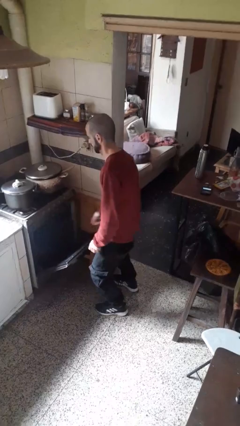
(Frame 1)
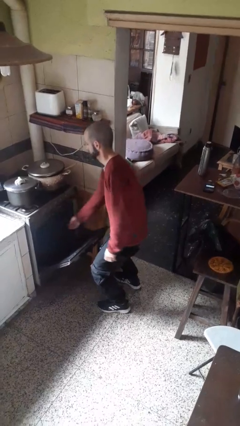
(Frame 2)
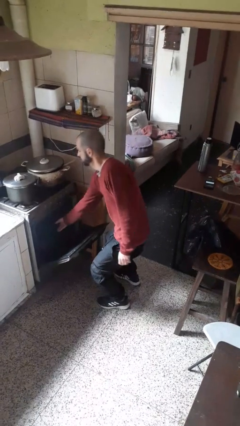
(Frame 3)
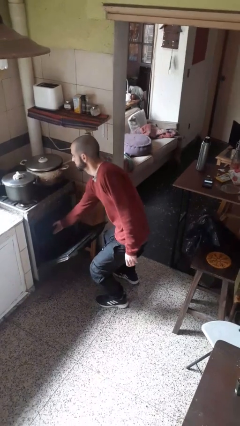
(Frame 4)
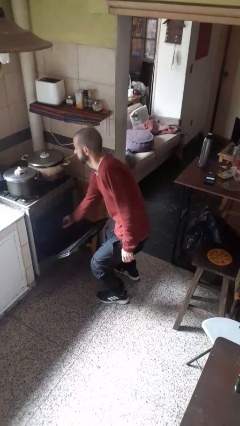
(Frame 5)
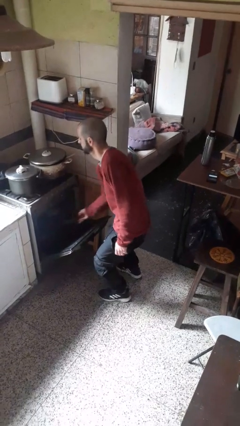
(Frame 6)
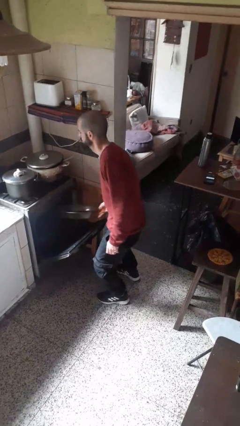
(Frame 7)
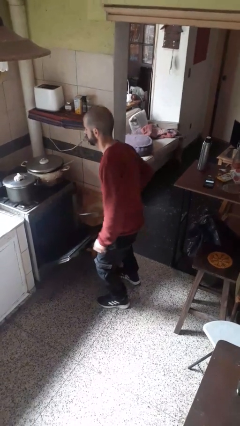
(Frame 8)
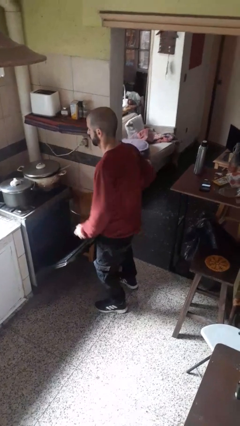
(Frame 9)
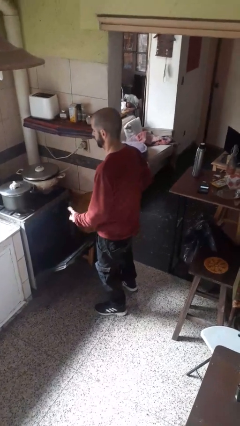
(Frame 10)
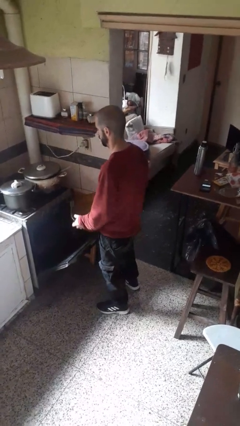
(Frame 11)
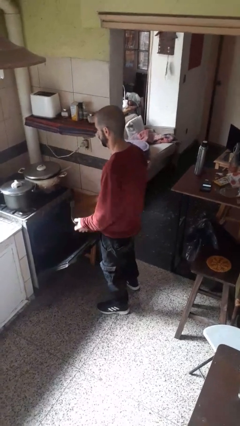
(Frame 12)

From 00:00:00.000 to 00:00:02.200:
person takes object from oven

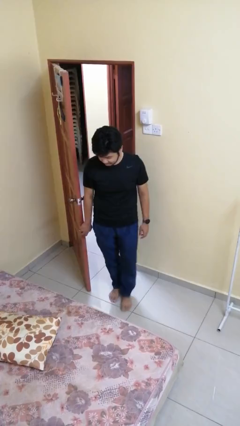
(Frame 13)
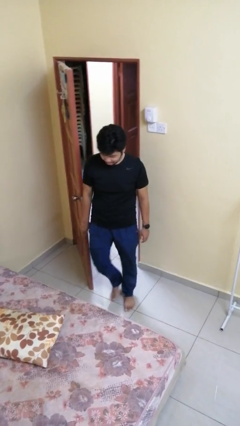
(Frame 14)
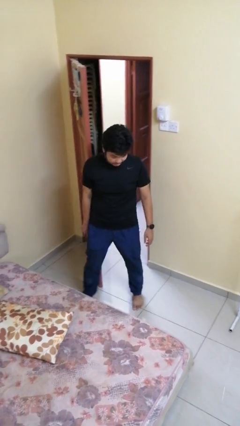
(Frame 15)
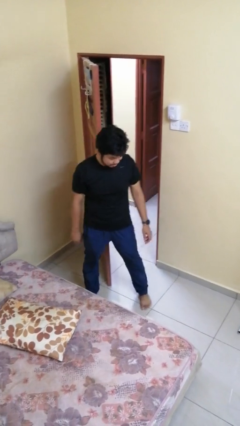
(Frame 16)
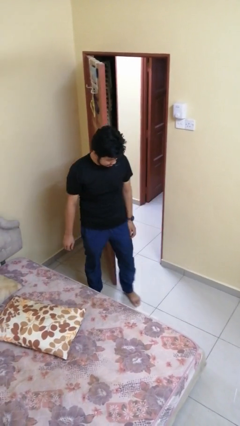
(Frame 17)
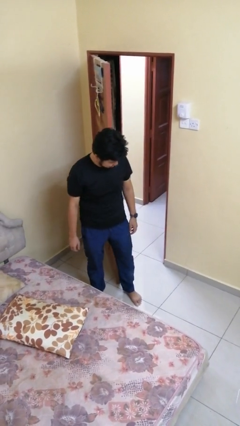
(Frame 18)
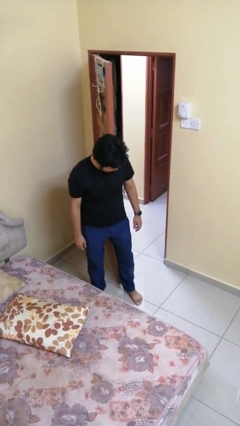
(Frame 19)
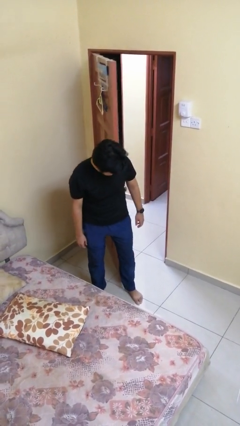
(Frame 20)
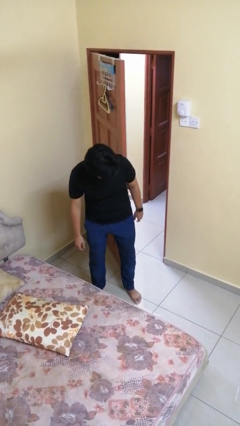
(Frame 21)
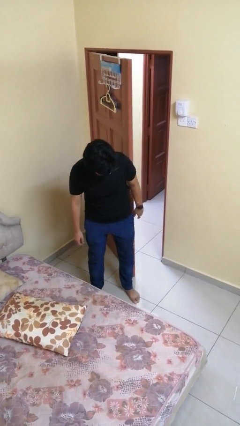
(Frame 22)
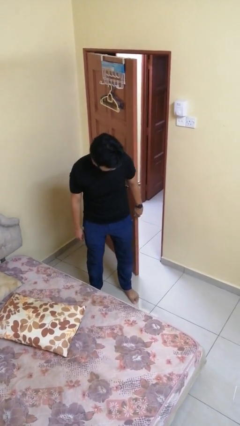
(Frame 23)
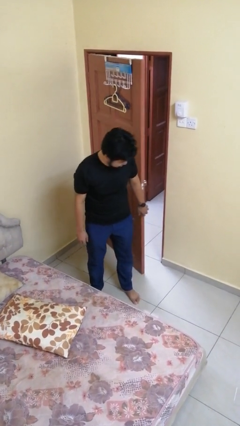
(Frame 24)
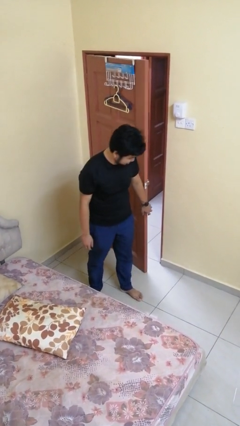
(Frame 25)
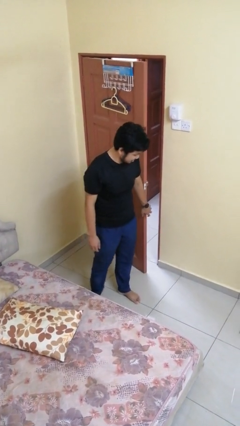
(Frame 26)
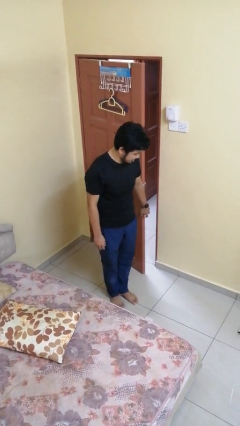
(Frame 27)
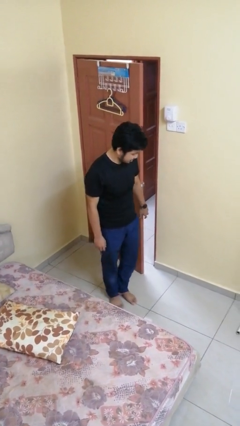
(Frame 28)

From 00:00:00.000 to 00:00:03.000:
person closes door with hip

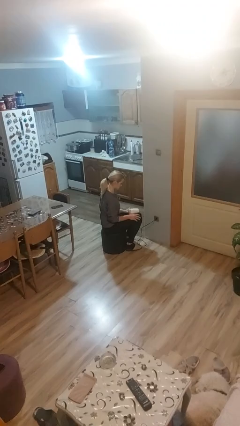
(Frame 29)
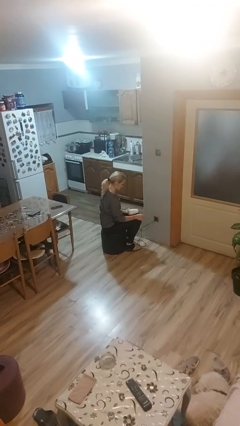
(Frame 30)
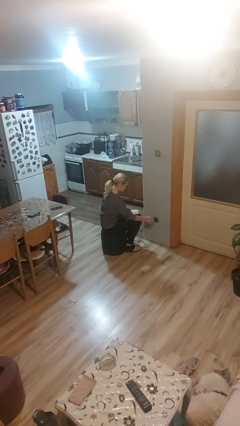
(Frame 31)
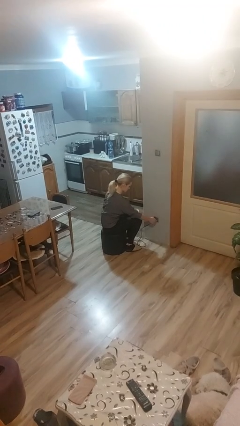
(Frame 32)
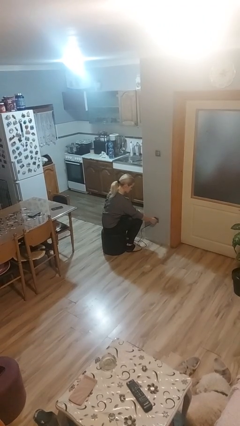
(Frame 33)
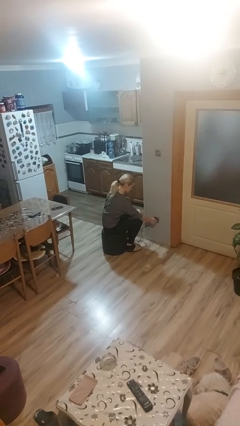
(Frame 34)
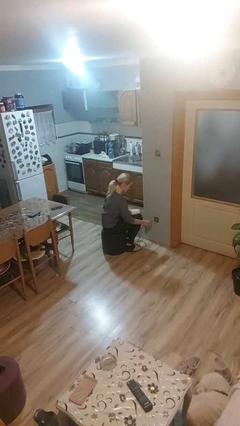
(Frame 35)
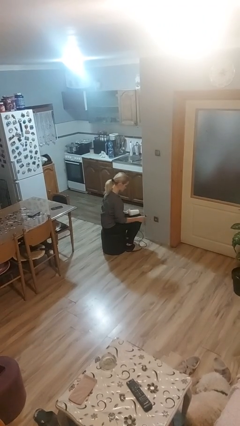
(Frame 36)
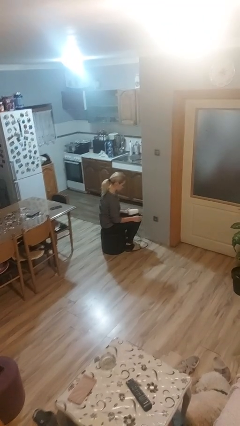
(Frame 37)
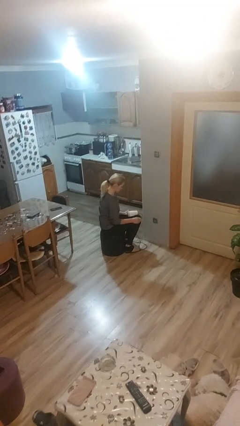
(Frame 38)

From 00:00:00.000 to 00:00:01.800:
person unplugs from electrical socket

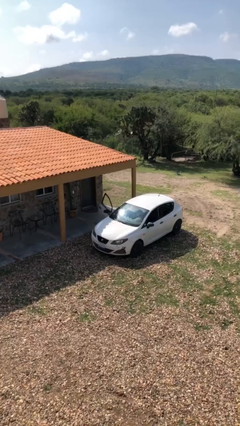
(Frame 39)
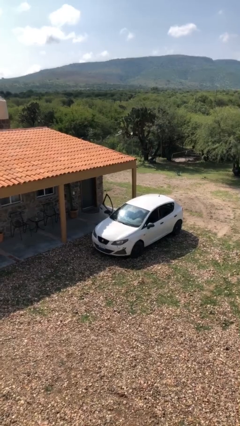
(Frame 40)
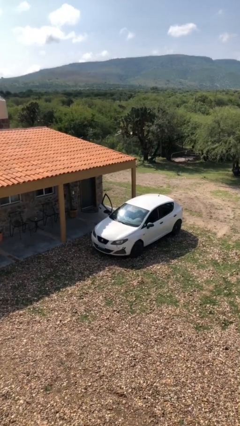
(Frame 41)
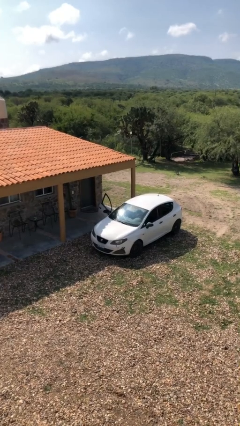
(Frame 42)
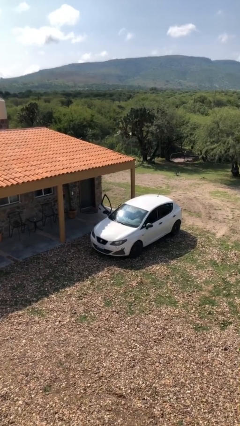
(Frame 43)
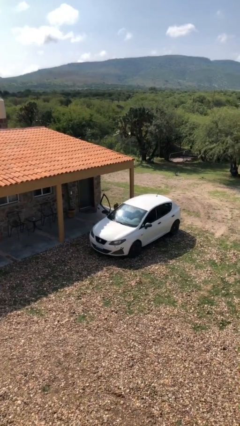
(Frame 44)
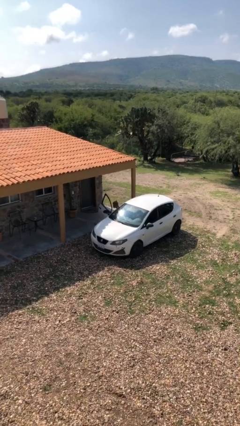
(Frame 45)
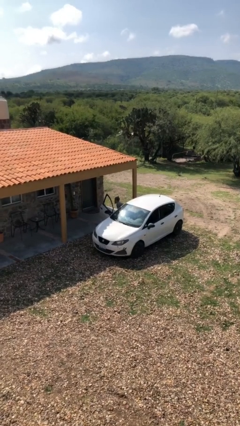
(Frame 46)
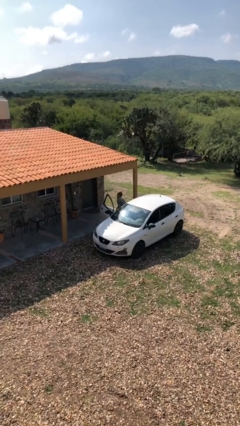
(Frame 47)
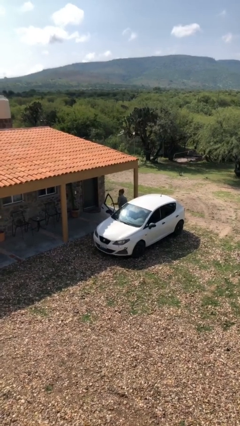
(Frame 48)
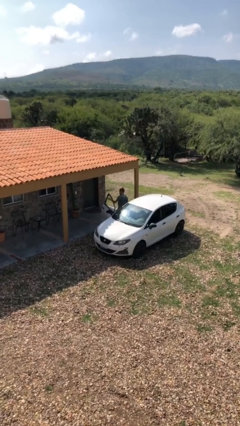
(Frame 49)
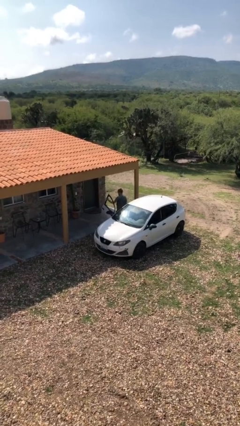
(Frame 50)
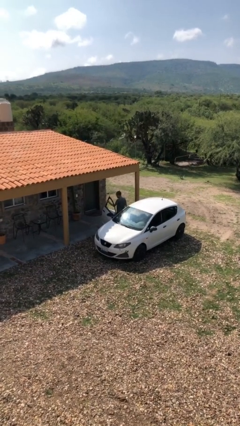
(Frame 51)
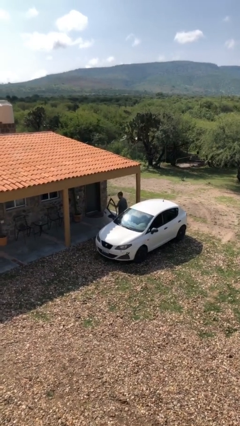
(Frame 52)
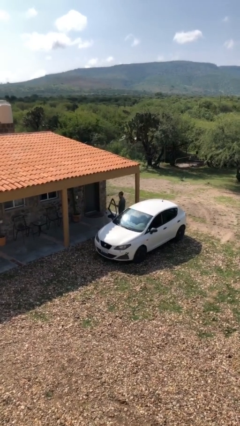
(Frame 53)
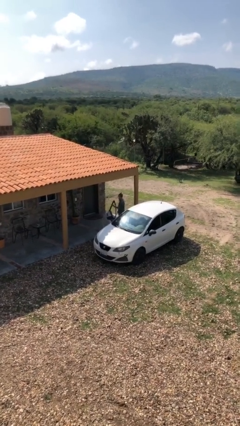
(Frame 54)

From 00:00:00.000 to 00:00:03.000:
person exits car

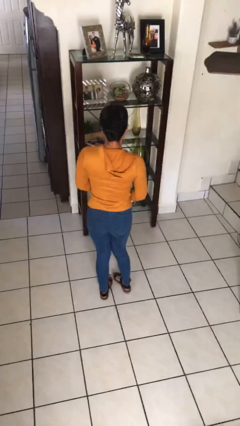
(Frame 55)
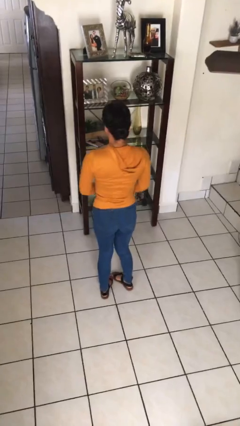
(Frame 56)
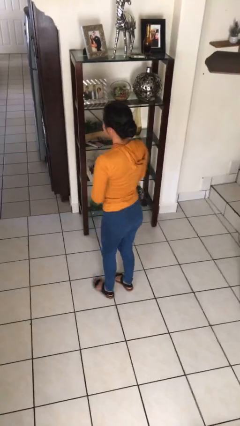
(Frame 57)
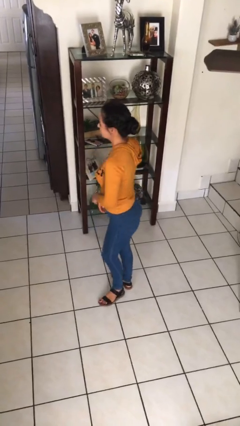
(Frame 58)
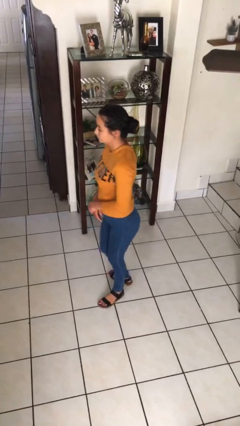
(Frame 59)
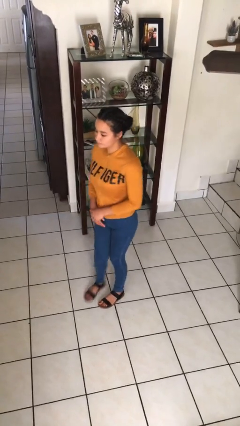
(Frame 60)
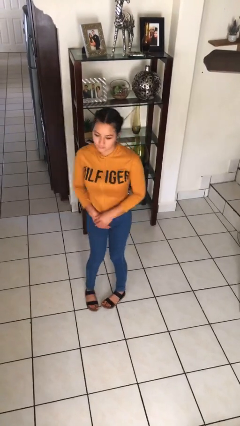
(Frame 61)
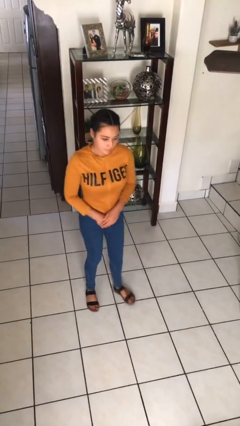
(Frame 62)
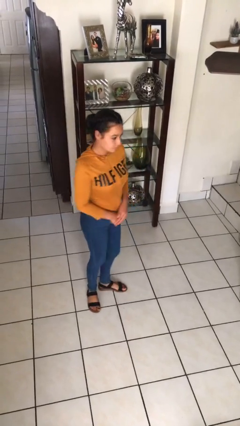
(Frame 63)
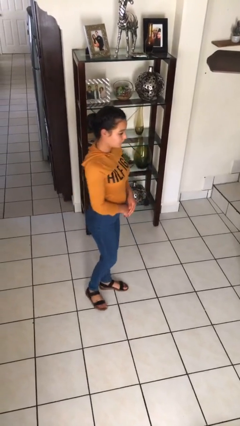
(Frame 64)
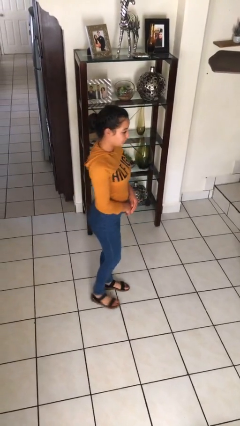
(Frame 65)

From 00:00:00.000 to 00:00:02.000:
person twirls

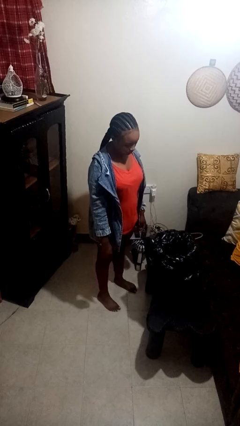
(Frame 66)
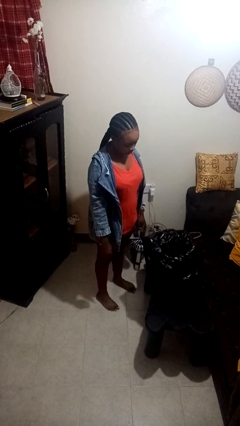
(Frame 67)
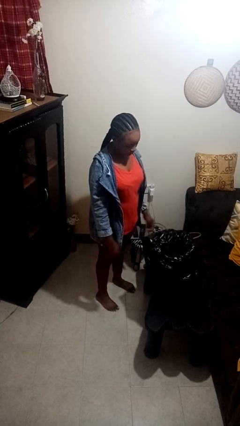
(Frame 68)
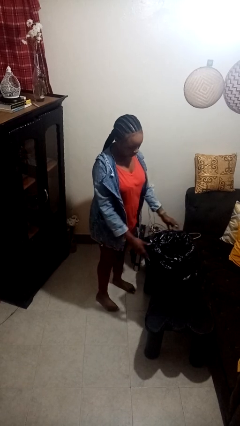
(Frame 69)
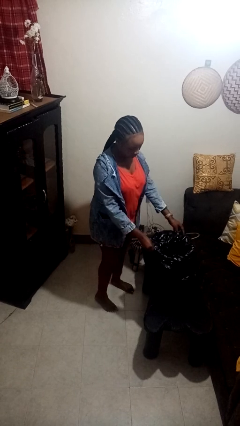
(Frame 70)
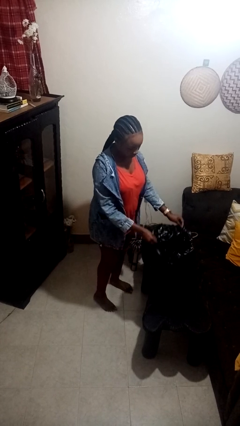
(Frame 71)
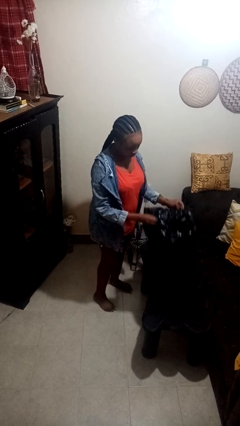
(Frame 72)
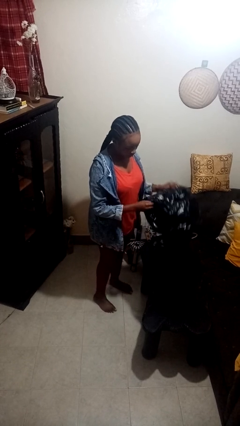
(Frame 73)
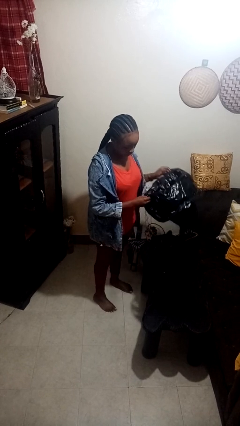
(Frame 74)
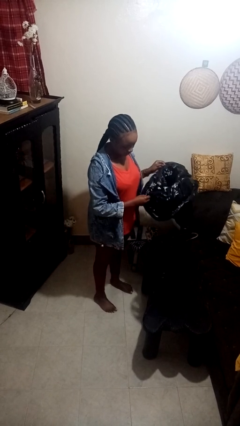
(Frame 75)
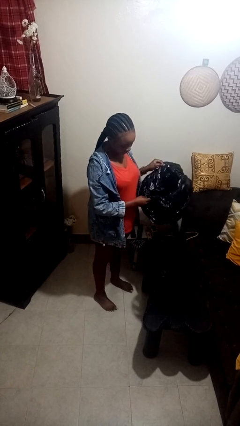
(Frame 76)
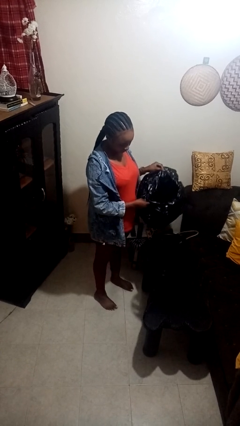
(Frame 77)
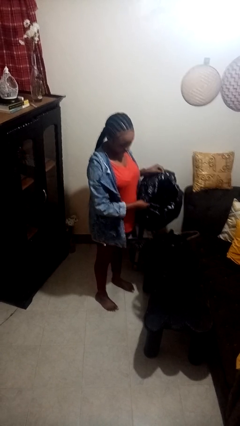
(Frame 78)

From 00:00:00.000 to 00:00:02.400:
person removes trashbag from trashcan

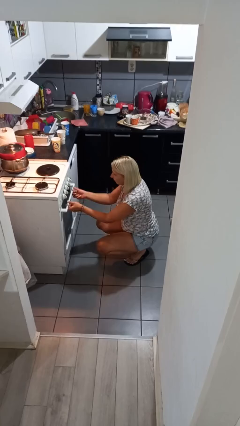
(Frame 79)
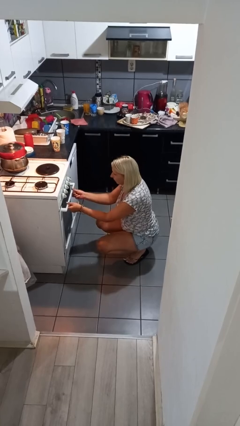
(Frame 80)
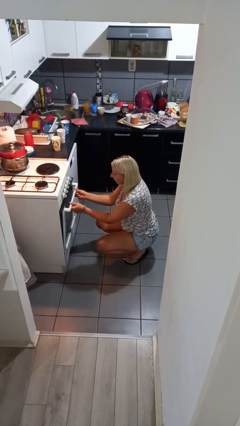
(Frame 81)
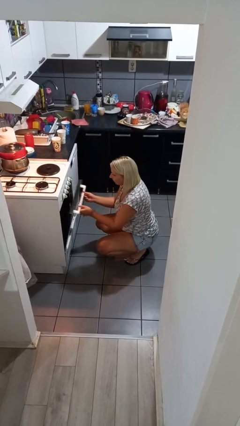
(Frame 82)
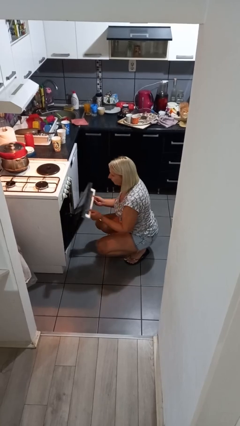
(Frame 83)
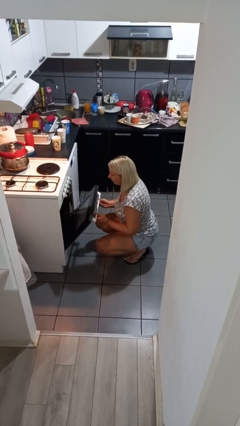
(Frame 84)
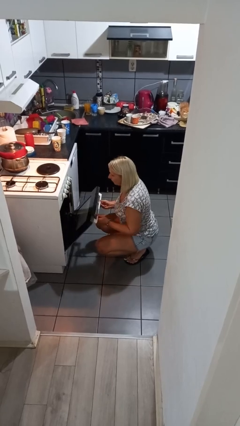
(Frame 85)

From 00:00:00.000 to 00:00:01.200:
person opens oven door

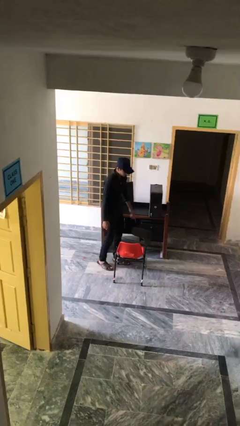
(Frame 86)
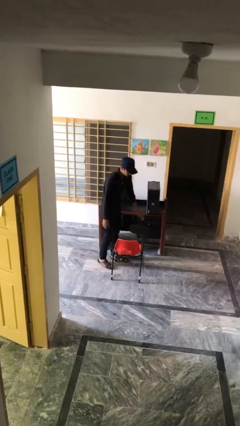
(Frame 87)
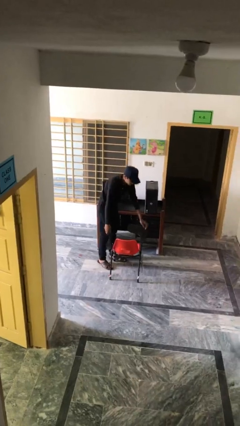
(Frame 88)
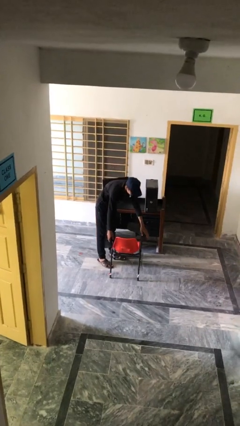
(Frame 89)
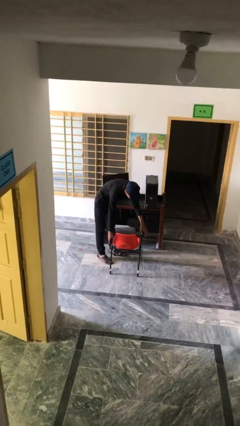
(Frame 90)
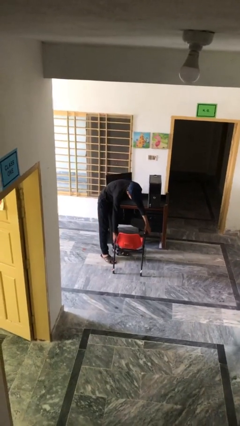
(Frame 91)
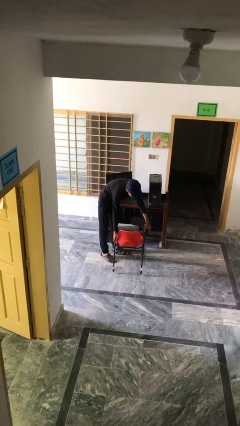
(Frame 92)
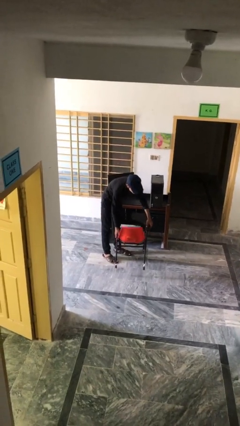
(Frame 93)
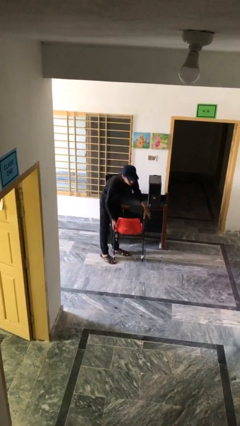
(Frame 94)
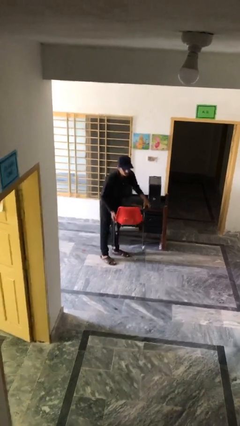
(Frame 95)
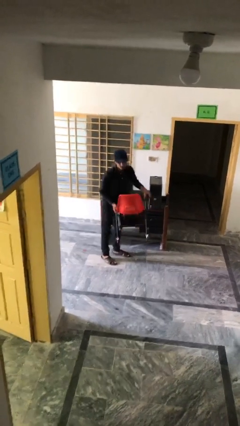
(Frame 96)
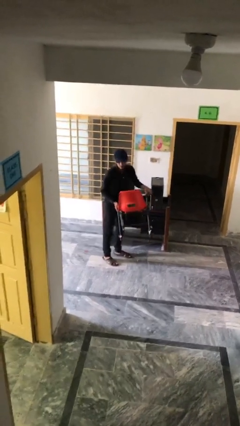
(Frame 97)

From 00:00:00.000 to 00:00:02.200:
person picks up object from floor
